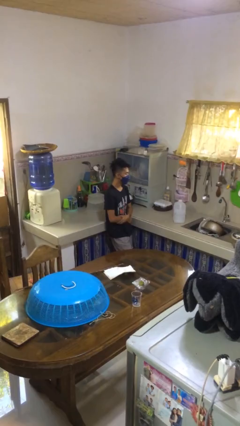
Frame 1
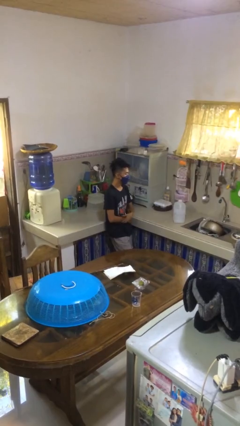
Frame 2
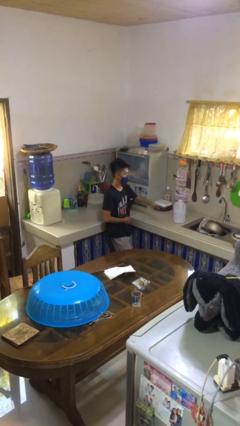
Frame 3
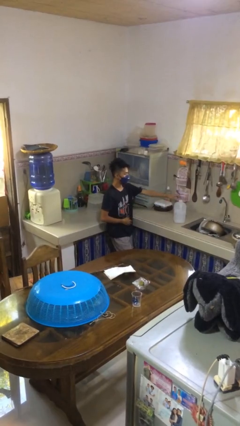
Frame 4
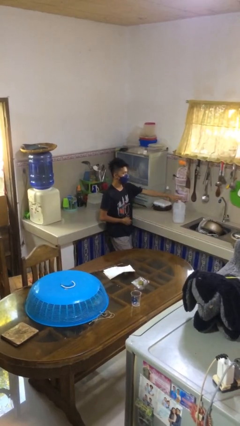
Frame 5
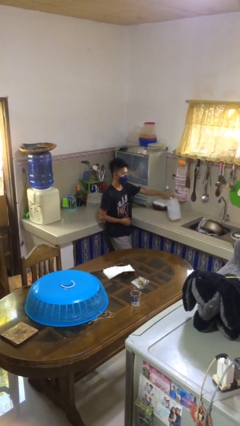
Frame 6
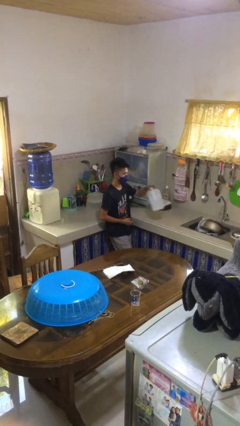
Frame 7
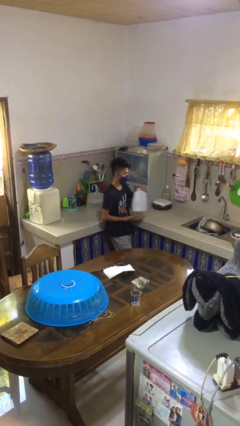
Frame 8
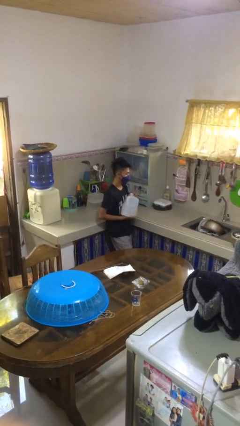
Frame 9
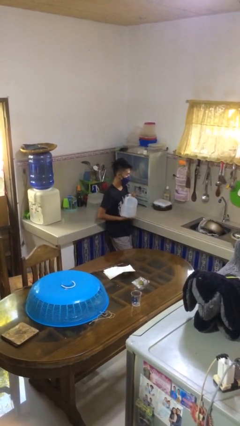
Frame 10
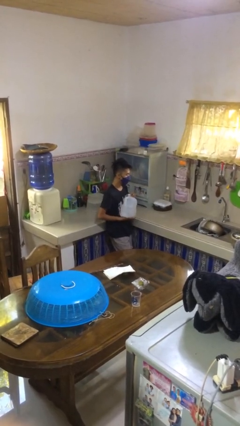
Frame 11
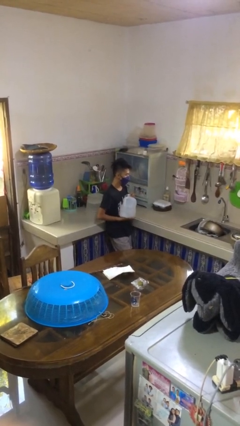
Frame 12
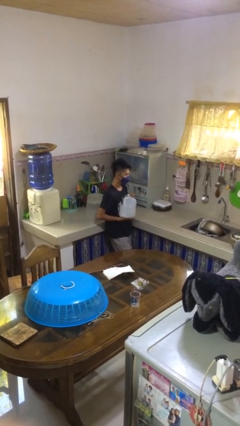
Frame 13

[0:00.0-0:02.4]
person picks up object from countertop

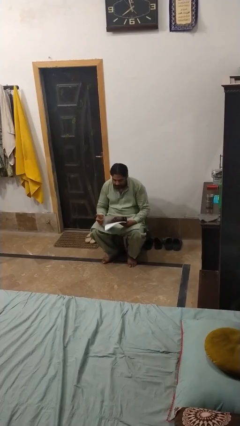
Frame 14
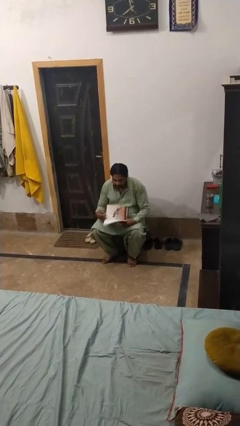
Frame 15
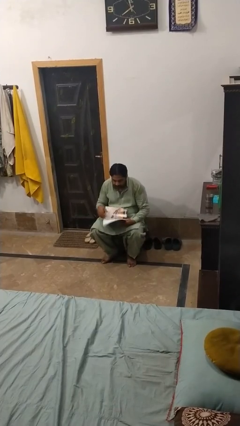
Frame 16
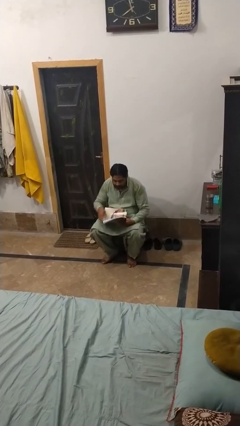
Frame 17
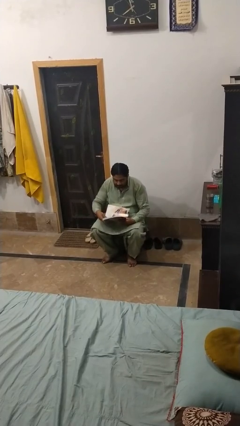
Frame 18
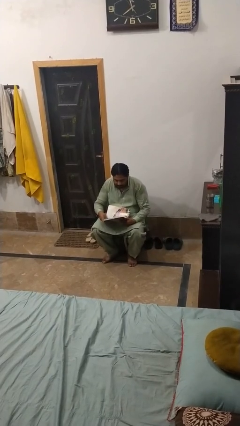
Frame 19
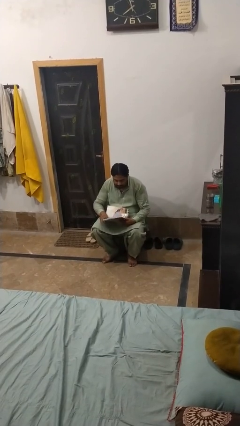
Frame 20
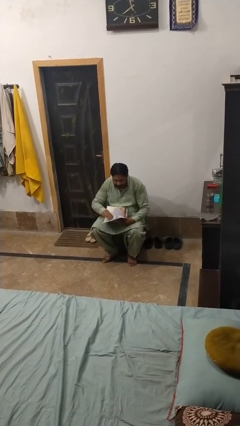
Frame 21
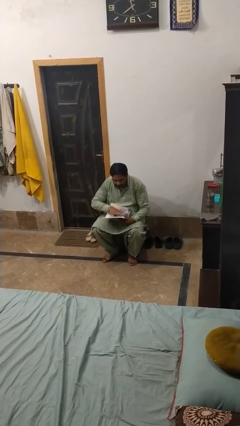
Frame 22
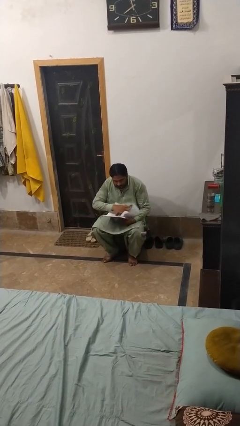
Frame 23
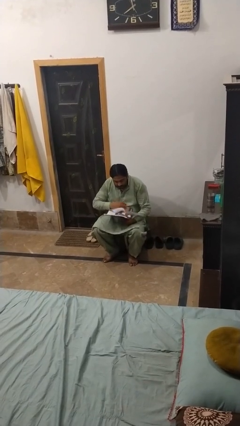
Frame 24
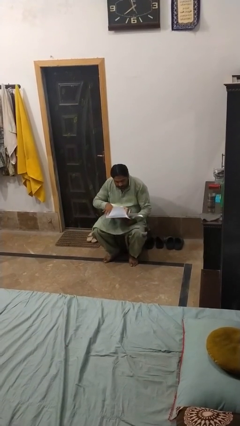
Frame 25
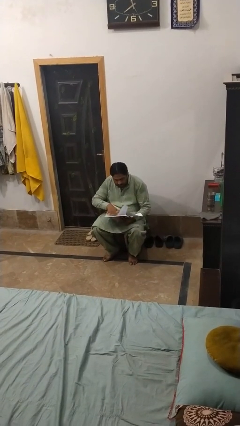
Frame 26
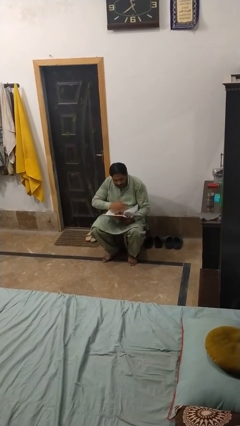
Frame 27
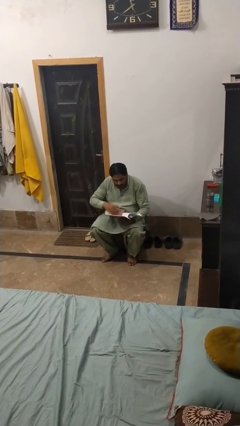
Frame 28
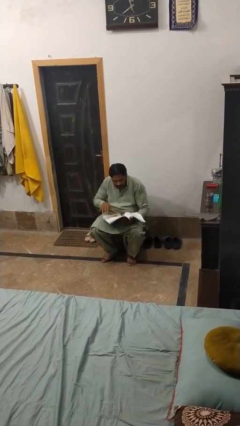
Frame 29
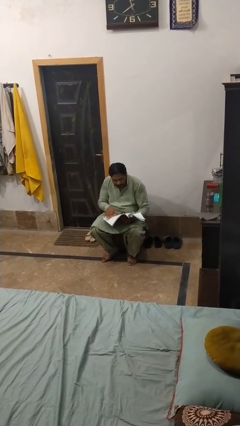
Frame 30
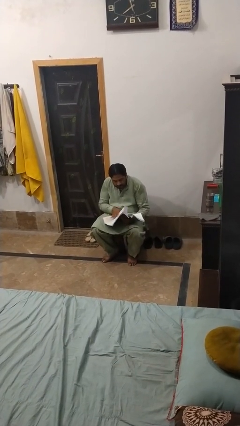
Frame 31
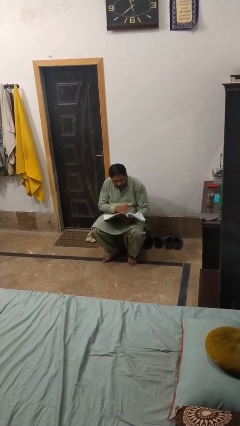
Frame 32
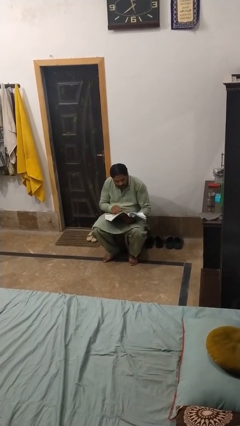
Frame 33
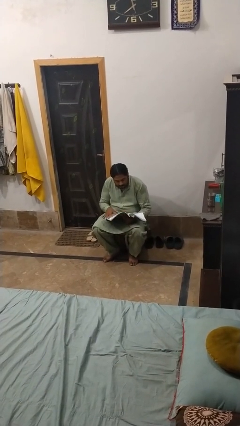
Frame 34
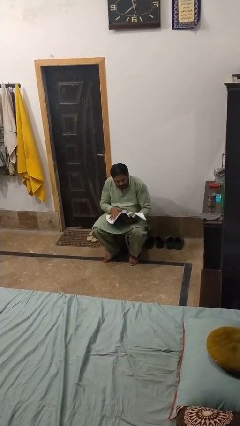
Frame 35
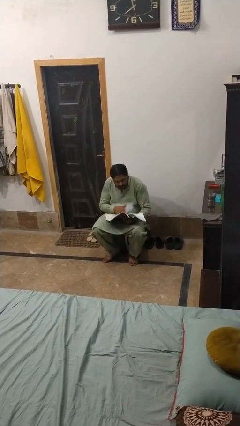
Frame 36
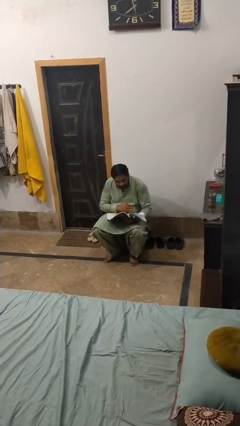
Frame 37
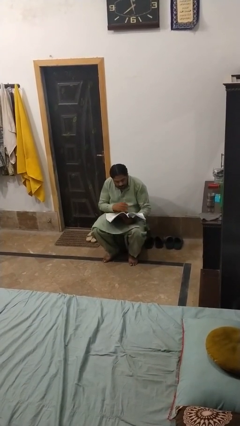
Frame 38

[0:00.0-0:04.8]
person reads book

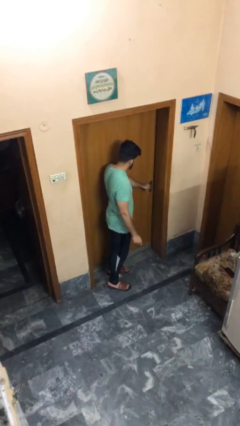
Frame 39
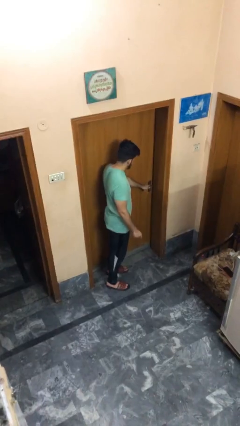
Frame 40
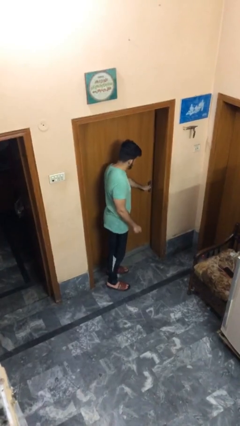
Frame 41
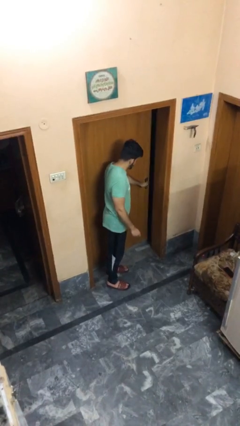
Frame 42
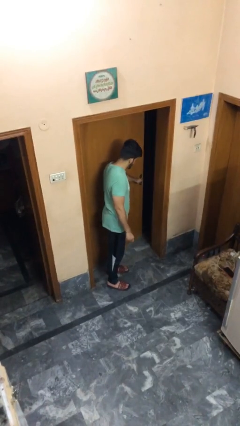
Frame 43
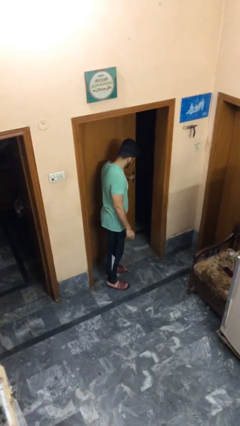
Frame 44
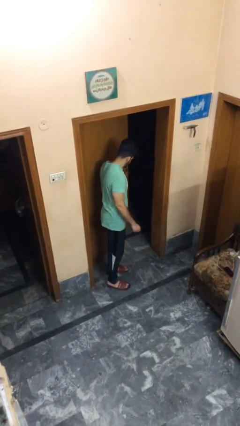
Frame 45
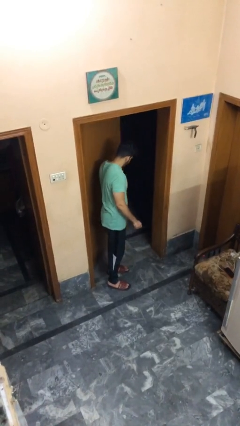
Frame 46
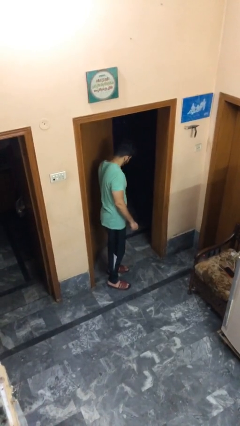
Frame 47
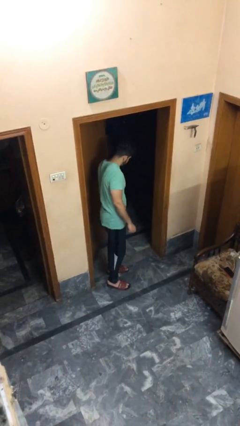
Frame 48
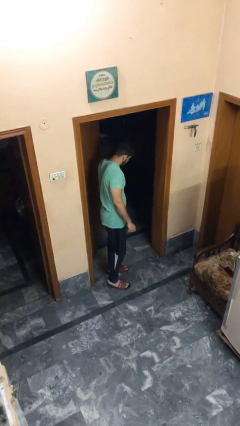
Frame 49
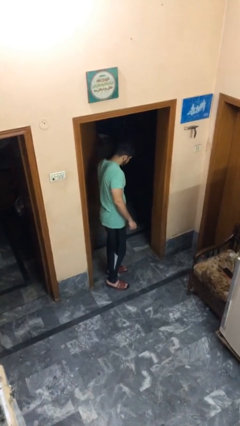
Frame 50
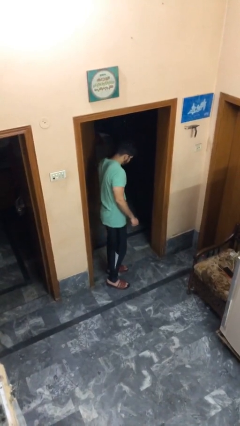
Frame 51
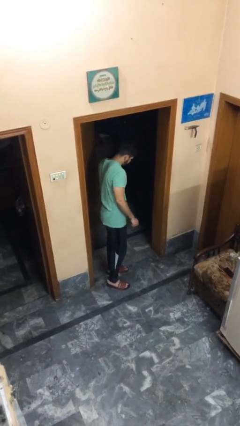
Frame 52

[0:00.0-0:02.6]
person opens facility door

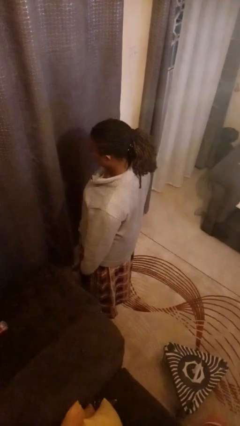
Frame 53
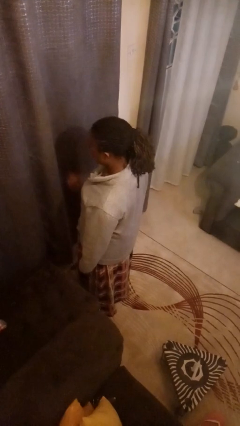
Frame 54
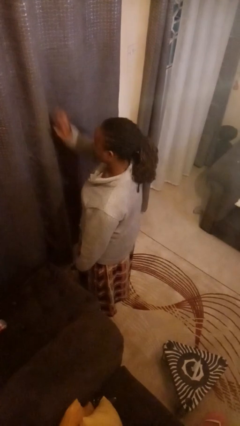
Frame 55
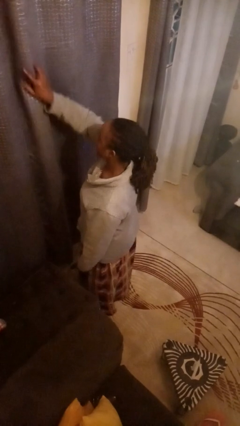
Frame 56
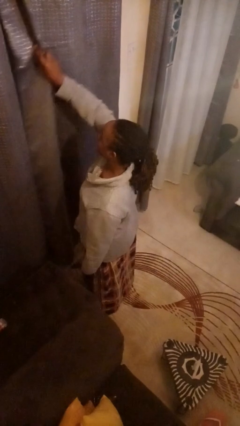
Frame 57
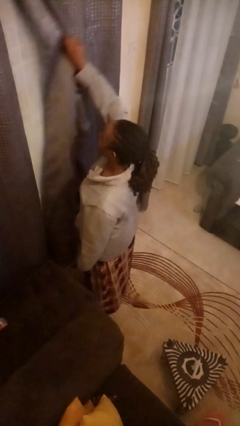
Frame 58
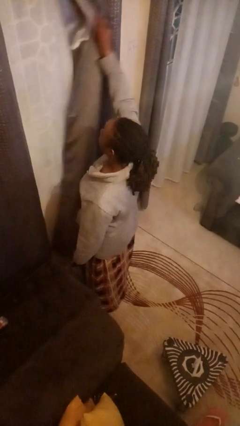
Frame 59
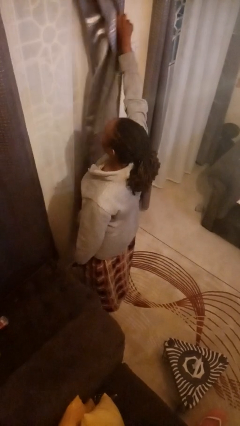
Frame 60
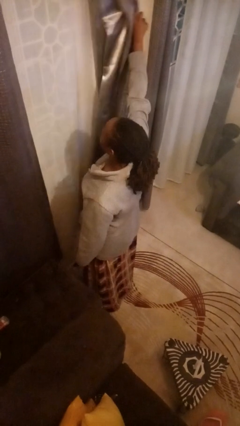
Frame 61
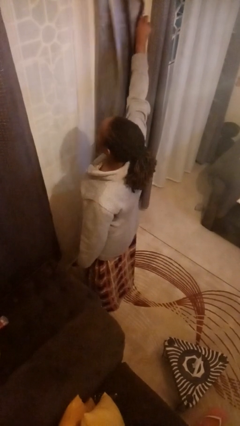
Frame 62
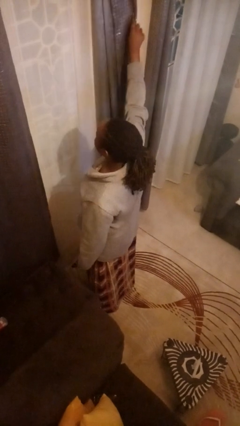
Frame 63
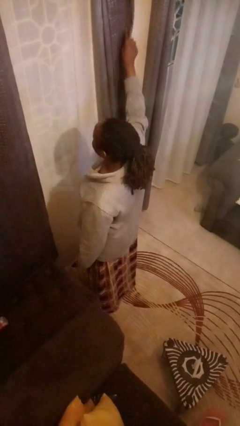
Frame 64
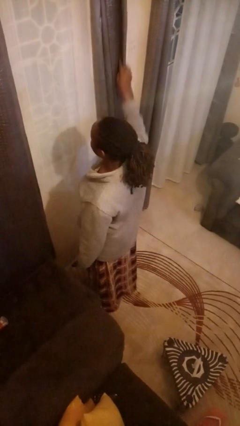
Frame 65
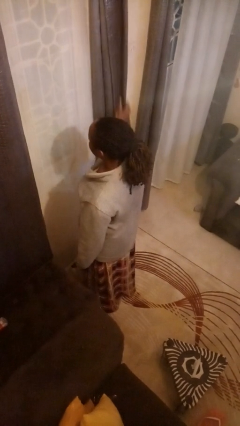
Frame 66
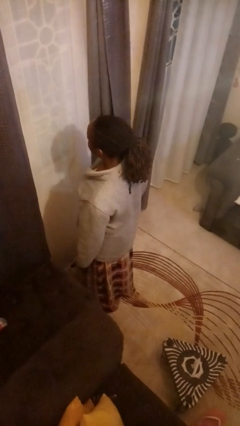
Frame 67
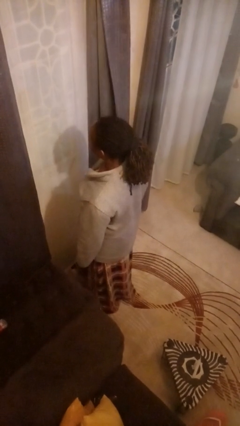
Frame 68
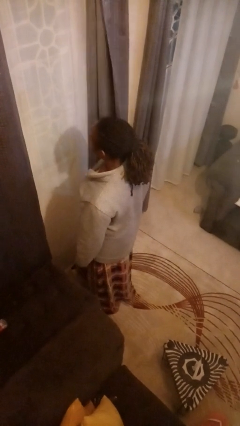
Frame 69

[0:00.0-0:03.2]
person opens curtains

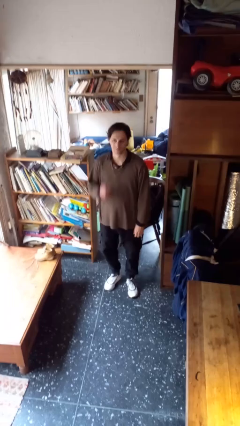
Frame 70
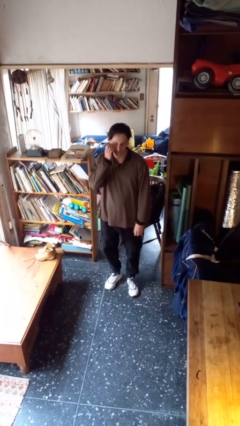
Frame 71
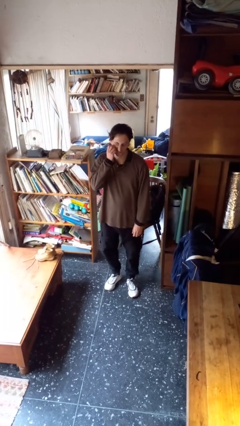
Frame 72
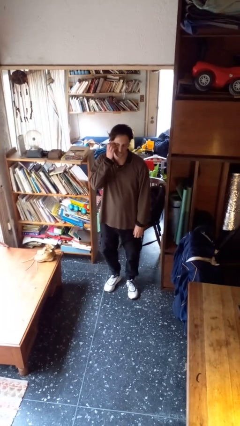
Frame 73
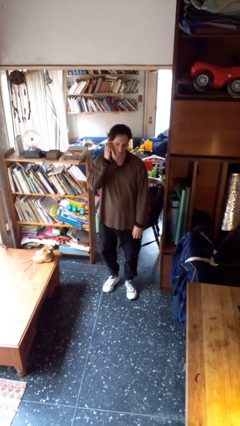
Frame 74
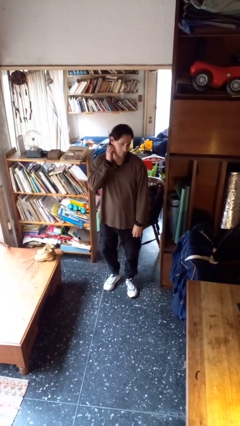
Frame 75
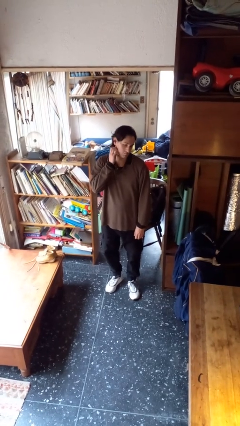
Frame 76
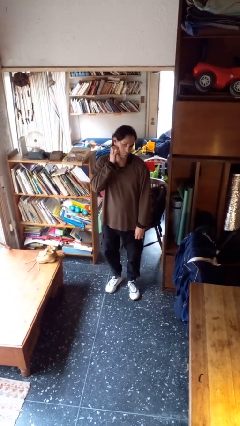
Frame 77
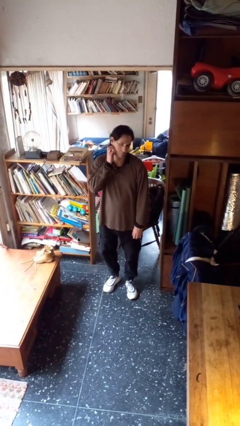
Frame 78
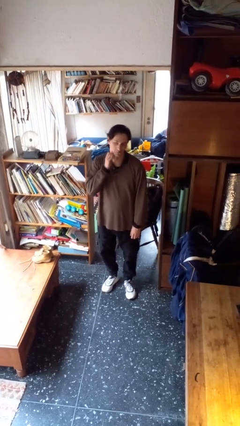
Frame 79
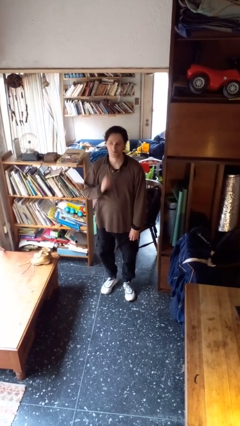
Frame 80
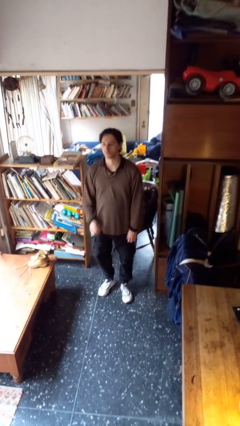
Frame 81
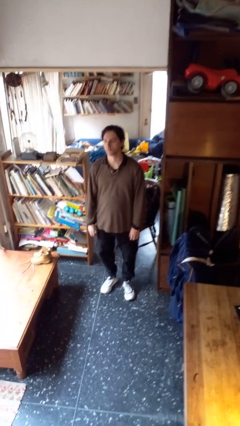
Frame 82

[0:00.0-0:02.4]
person scratches face

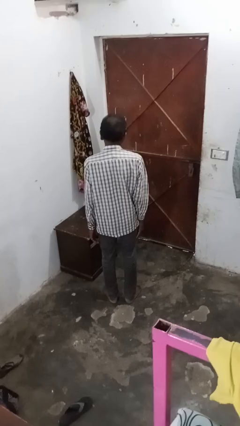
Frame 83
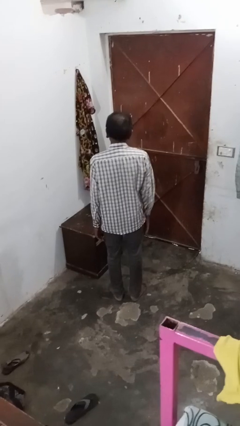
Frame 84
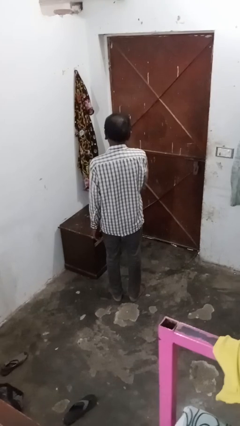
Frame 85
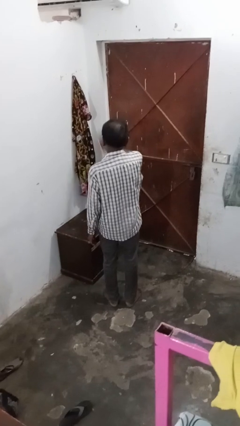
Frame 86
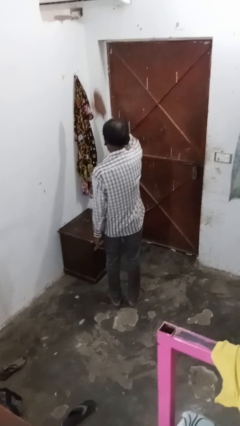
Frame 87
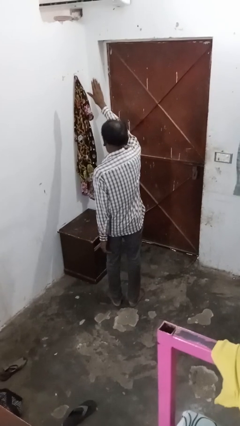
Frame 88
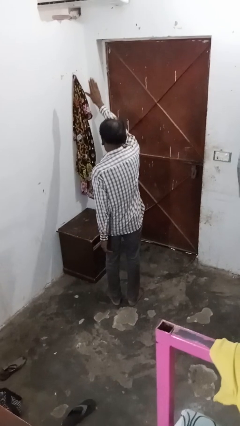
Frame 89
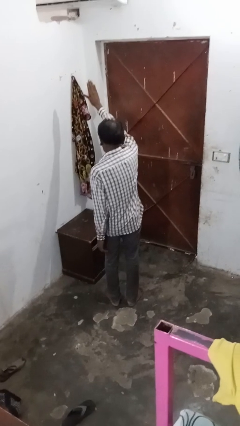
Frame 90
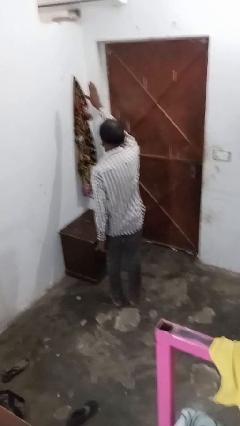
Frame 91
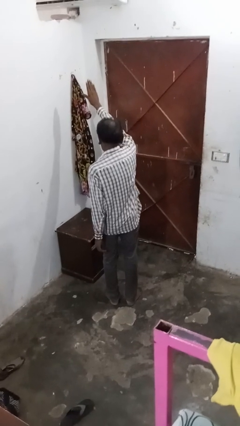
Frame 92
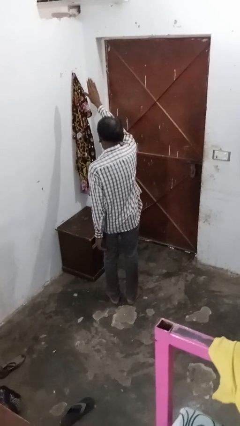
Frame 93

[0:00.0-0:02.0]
person gestures stop

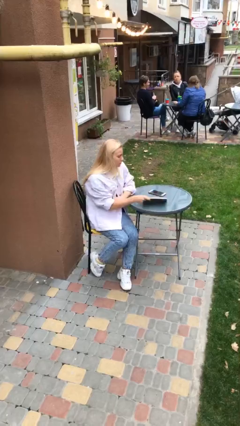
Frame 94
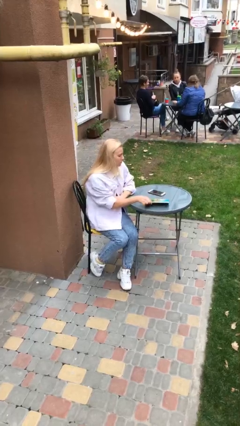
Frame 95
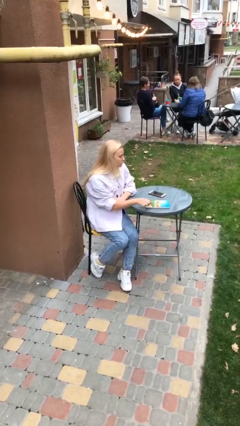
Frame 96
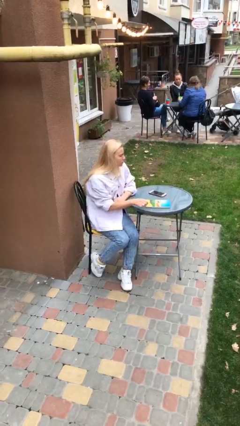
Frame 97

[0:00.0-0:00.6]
person puts down object on table
